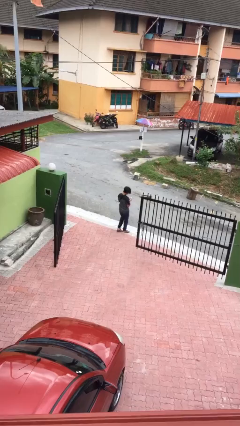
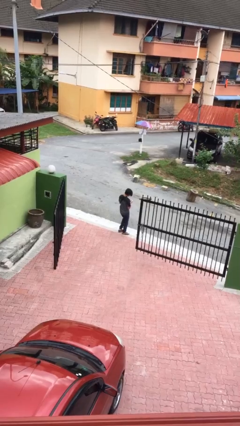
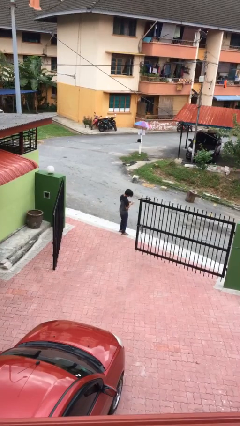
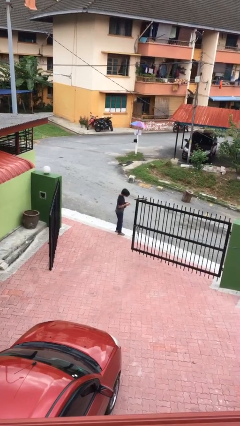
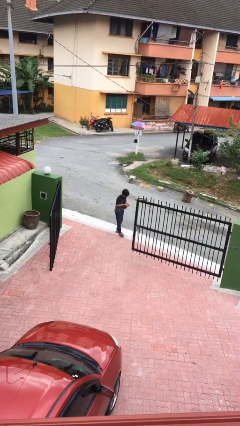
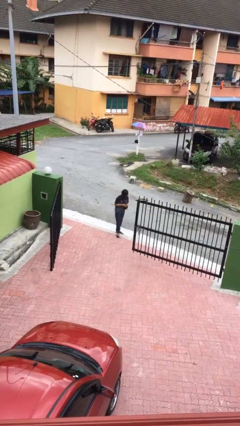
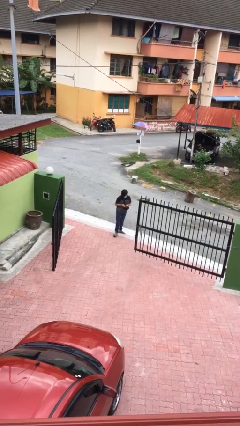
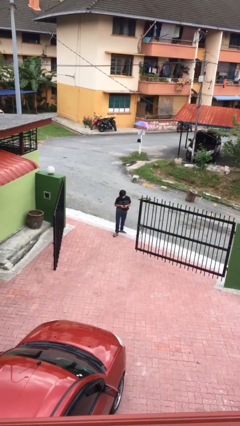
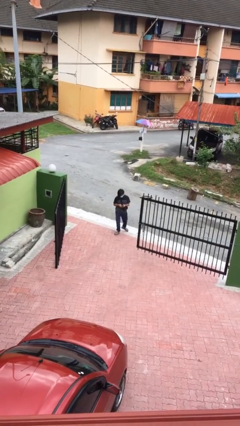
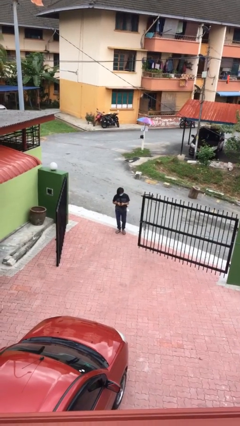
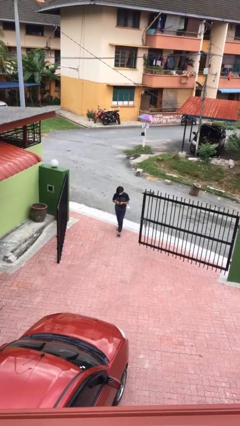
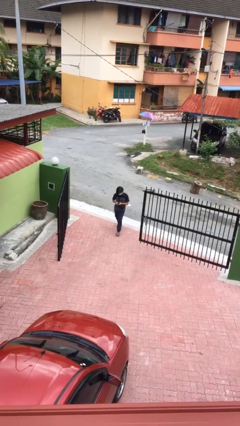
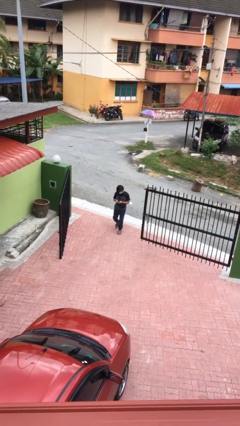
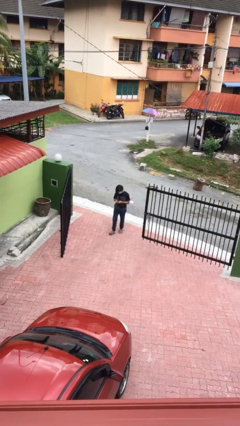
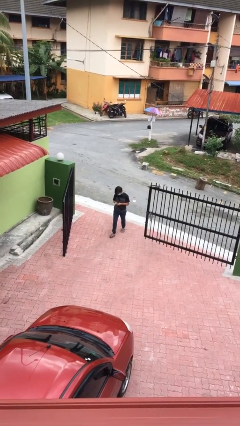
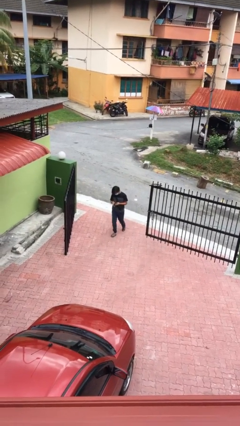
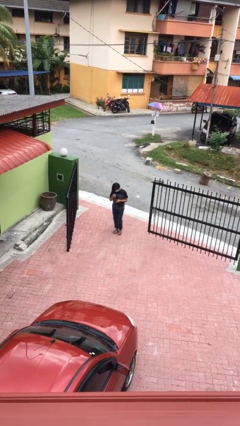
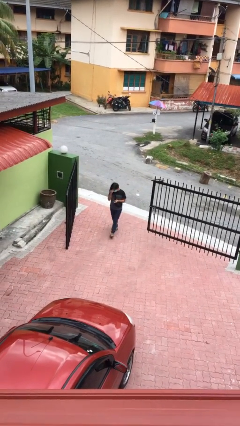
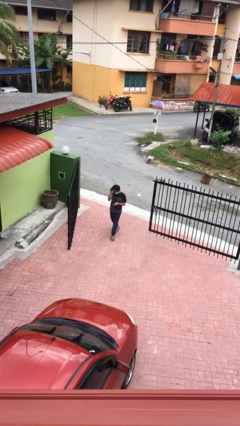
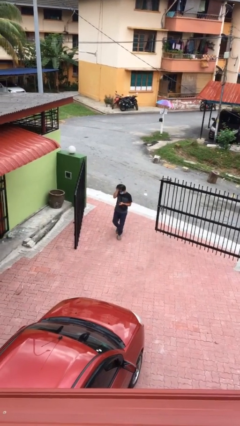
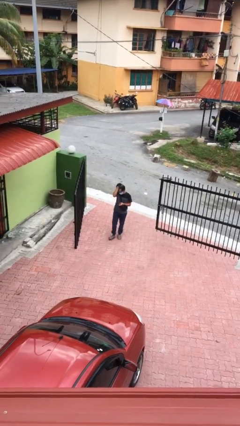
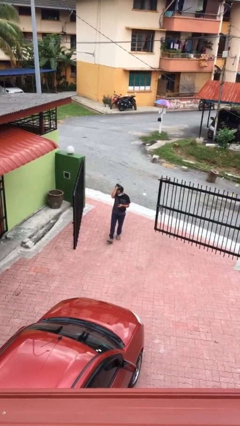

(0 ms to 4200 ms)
person enters scene through structure

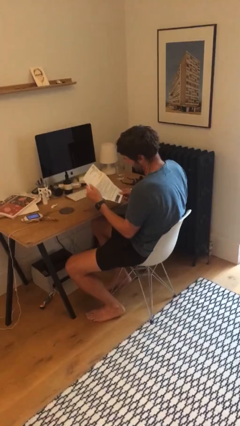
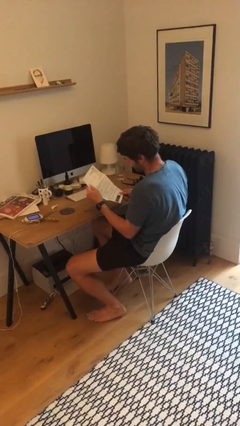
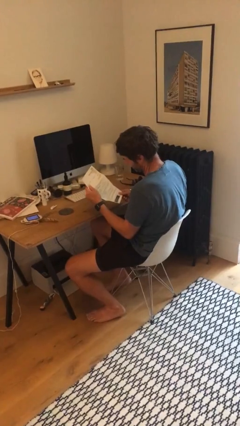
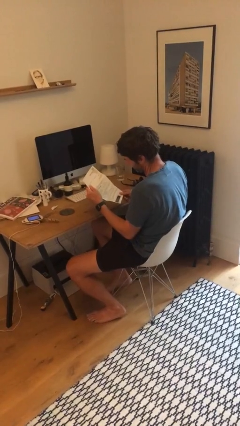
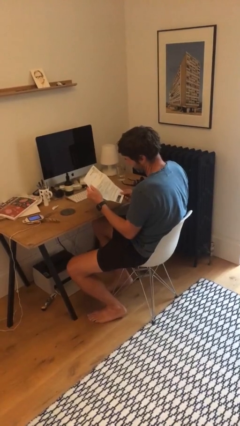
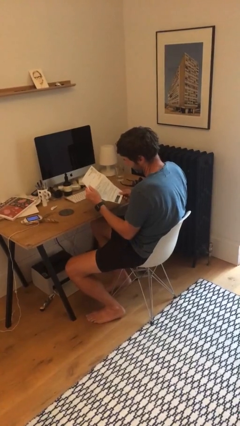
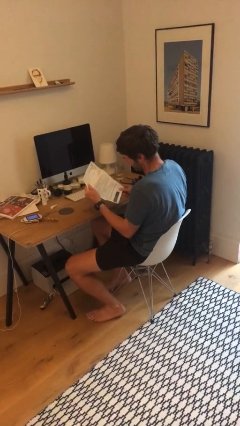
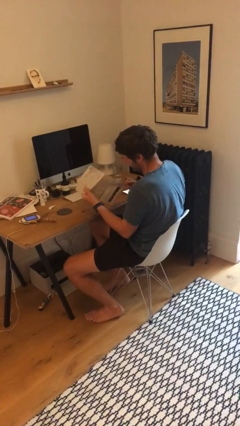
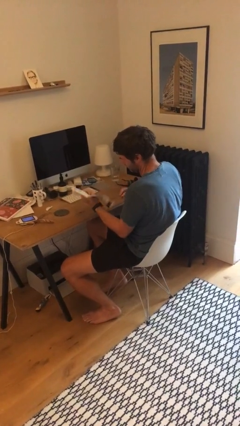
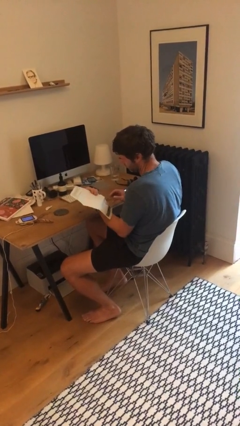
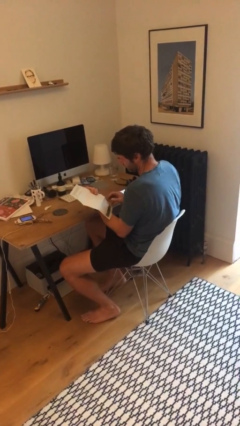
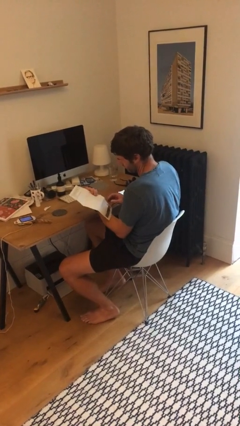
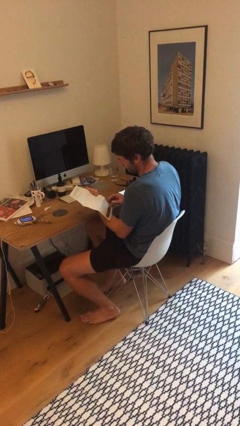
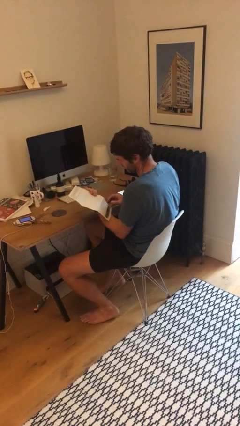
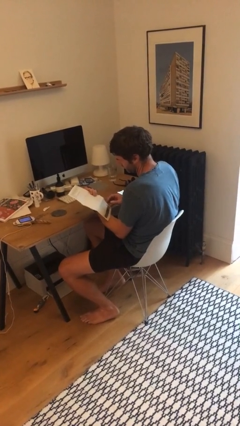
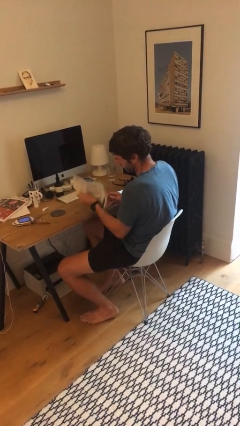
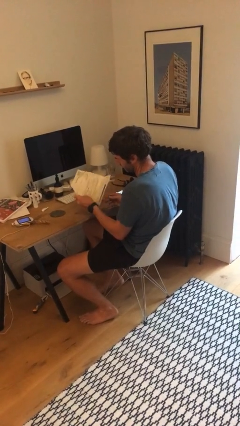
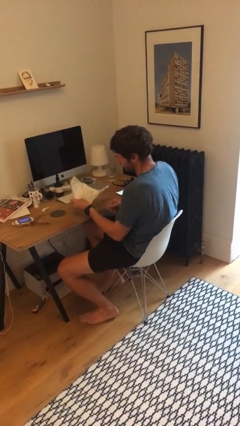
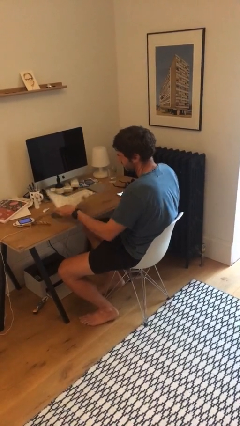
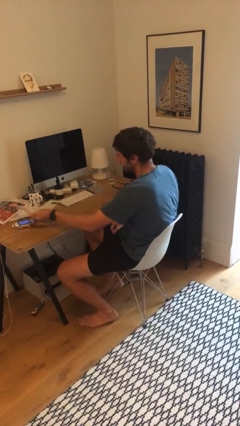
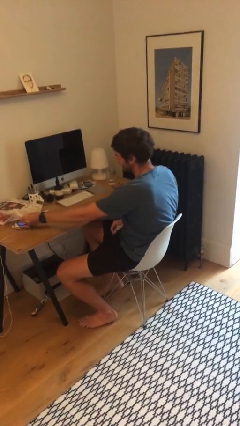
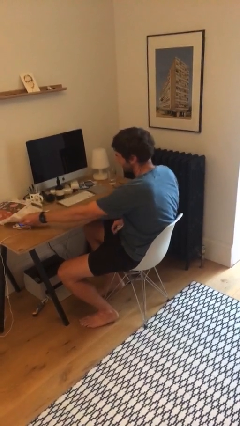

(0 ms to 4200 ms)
person reads document

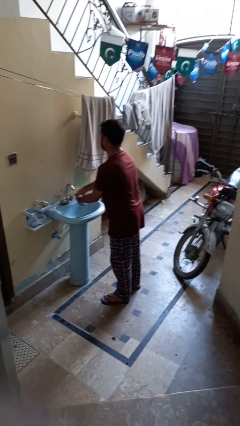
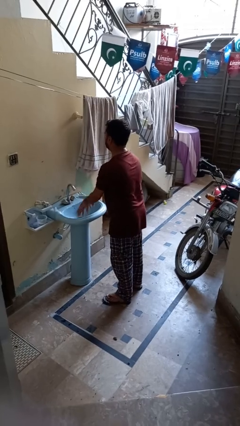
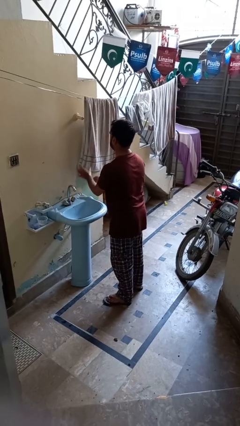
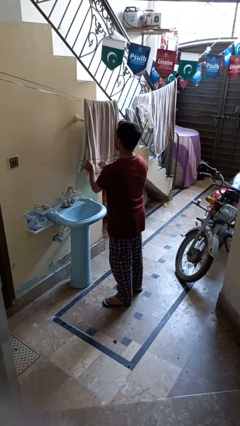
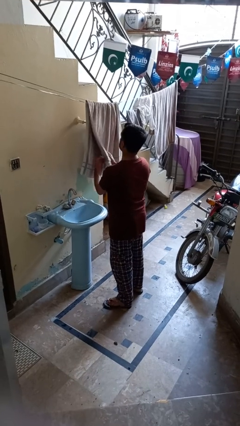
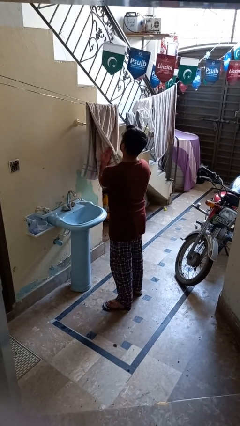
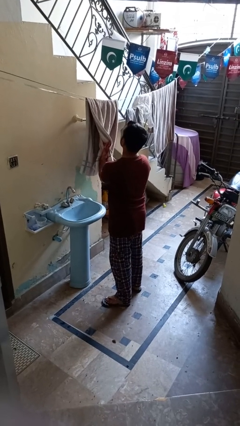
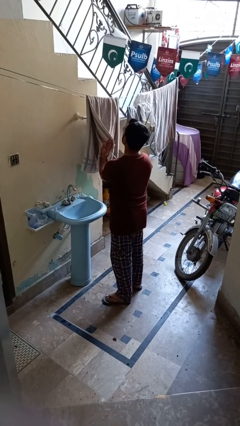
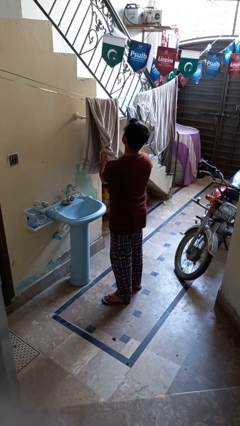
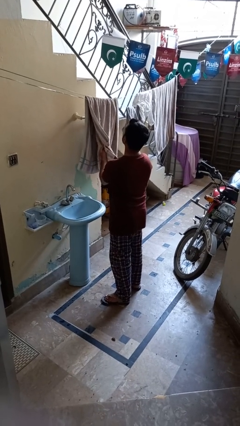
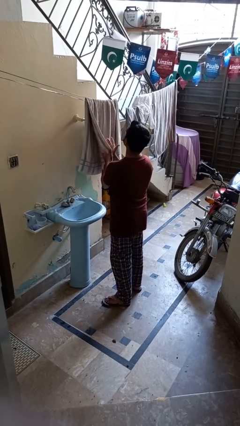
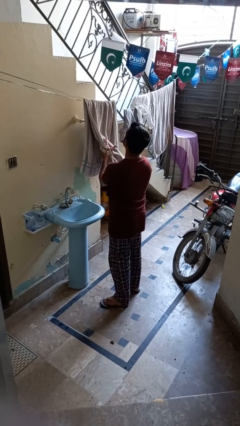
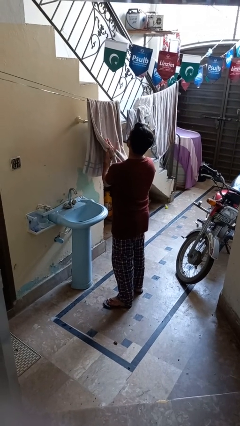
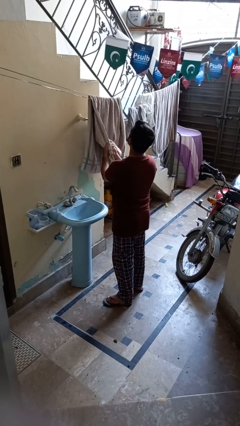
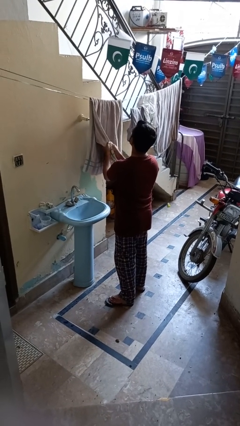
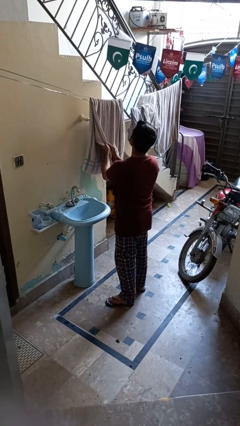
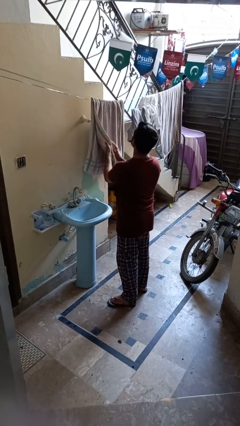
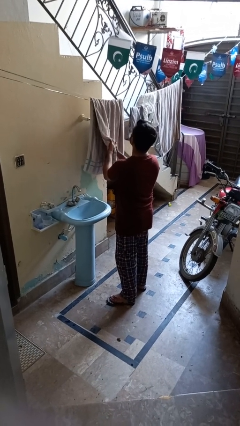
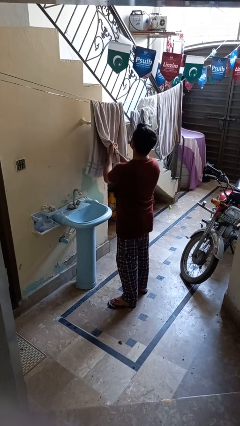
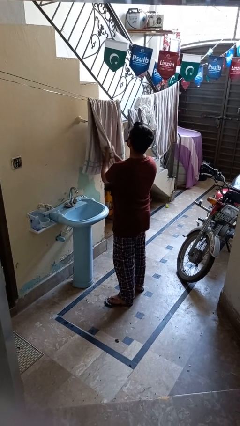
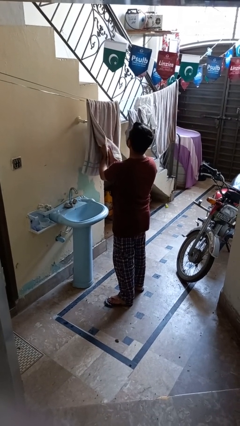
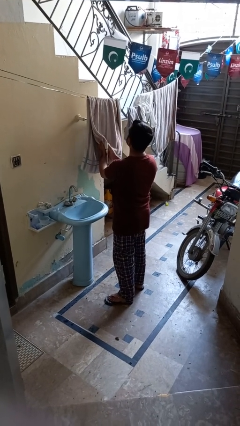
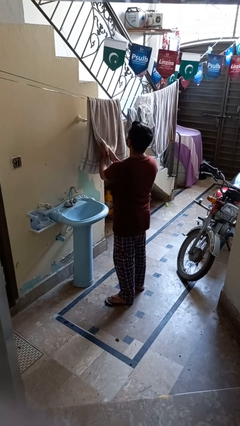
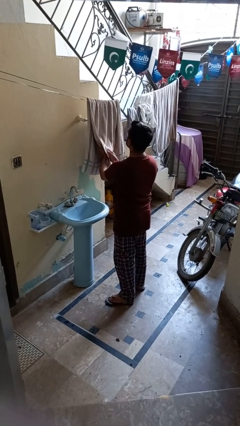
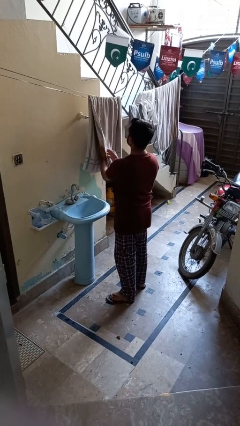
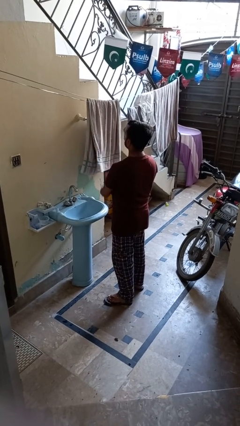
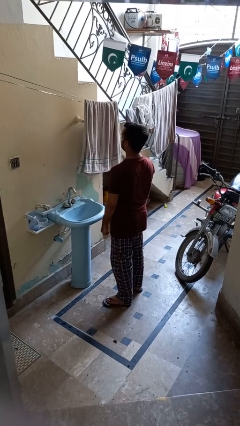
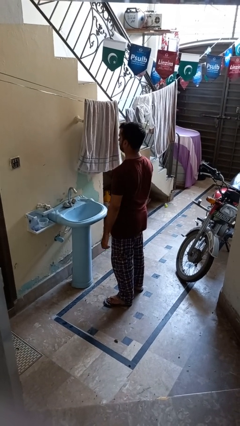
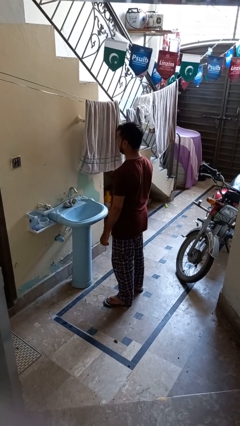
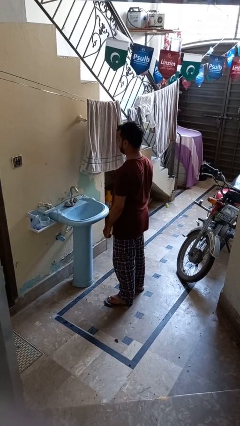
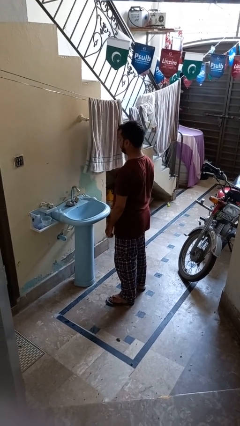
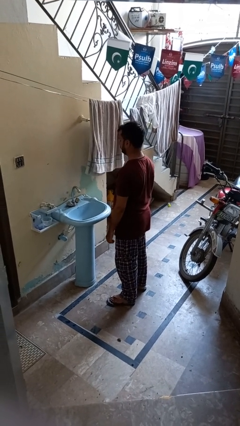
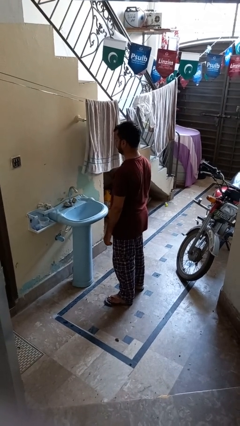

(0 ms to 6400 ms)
person dries hands with towel

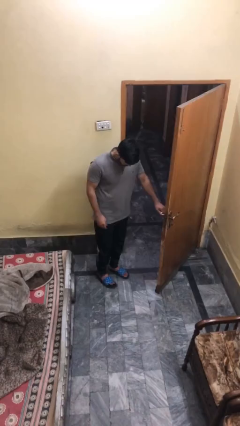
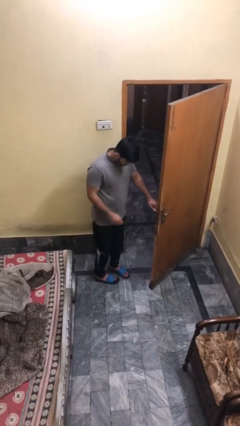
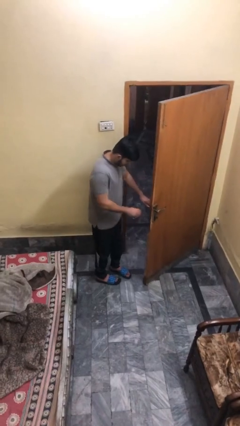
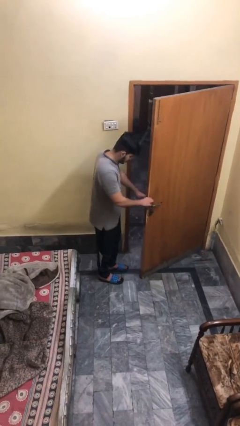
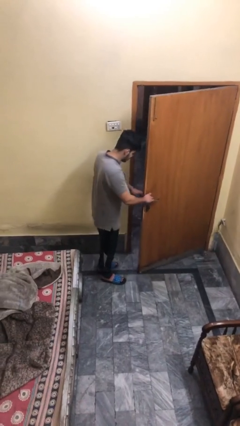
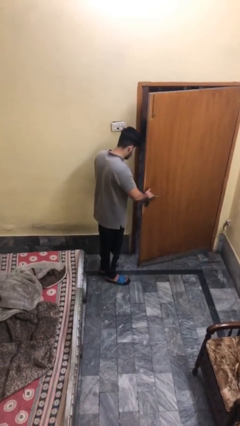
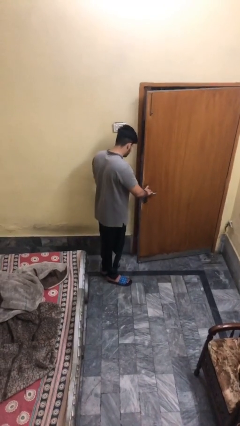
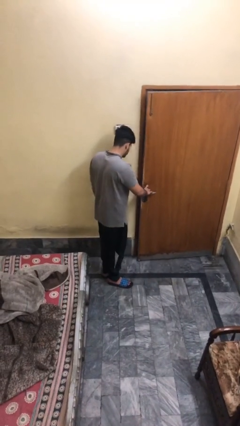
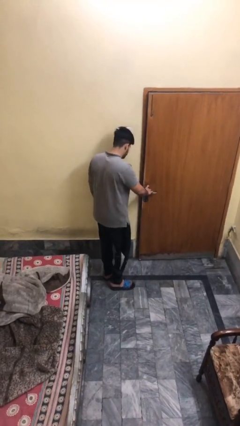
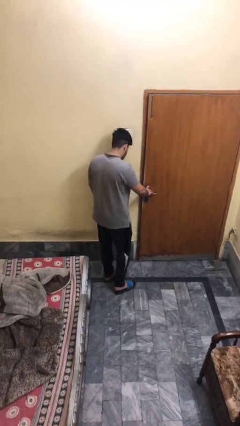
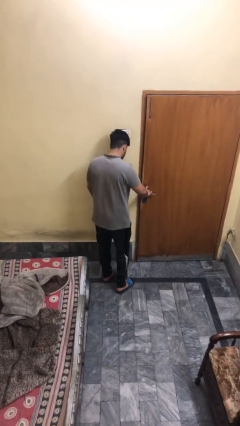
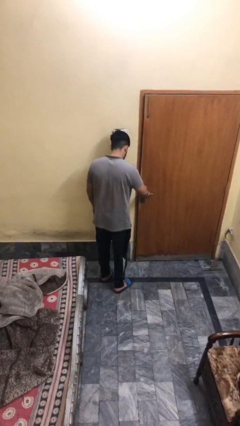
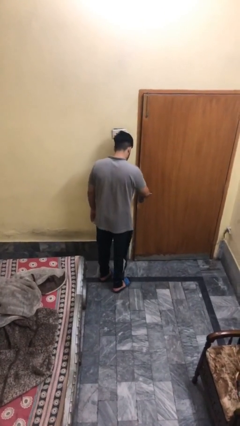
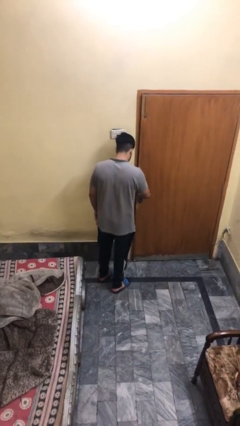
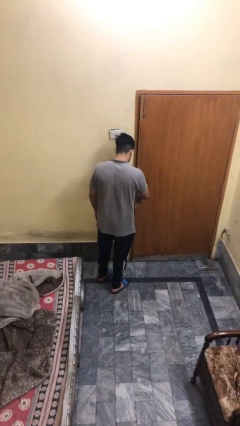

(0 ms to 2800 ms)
person closes facility door
